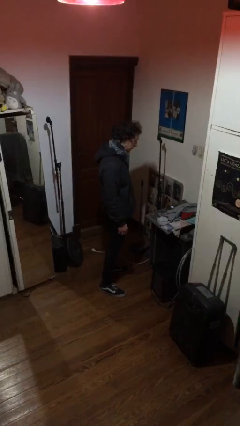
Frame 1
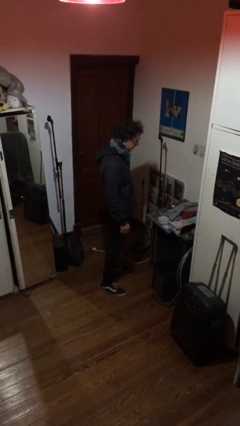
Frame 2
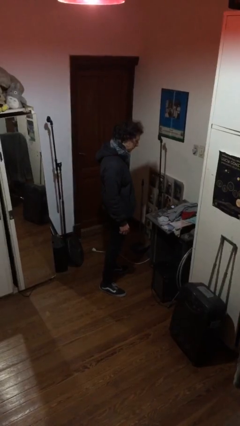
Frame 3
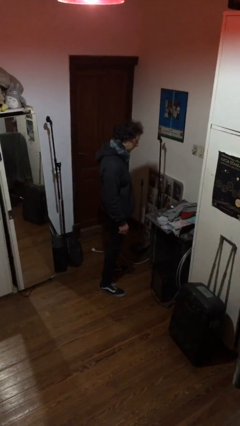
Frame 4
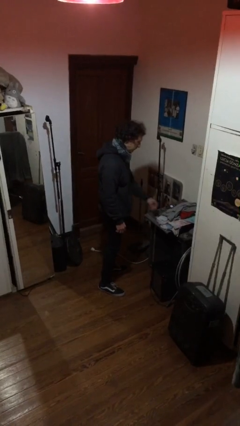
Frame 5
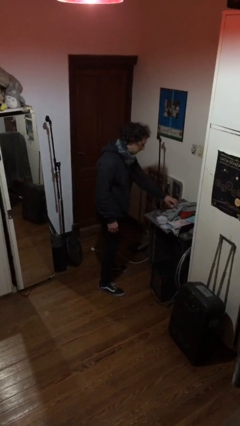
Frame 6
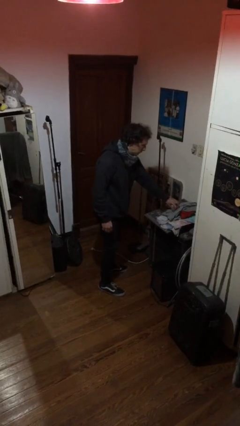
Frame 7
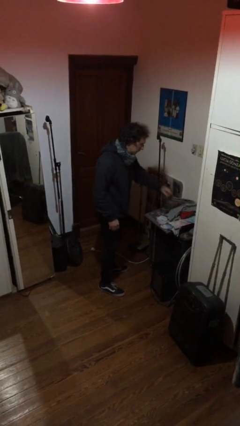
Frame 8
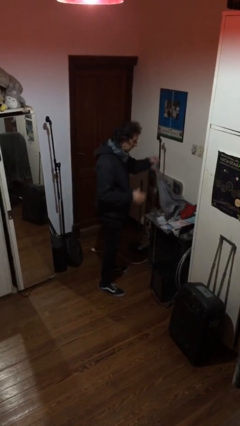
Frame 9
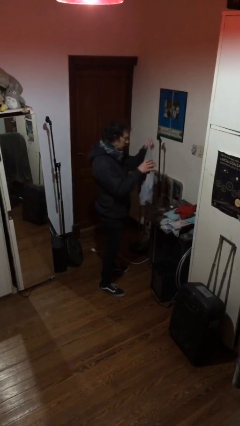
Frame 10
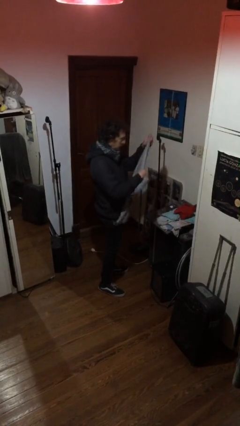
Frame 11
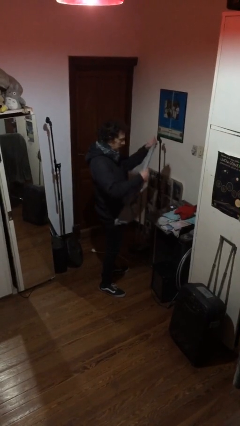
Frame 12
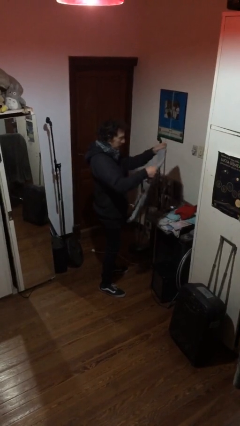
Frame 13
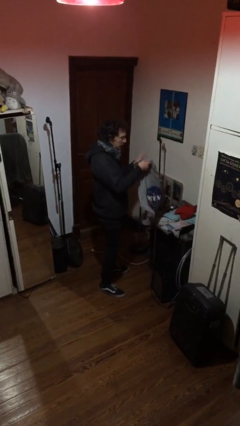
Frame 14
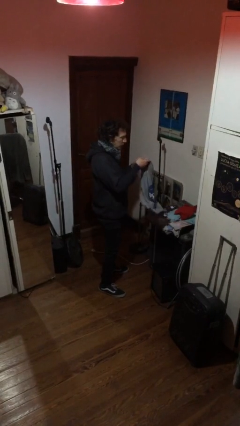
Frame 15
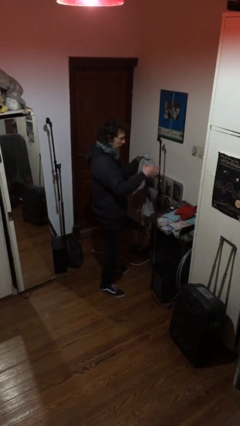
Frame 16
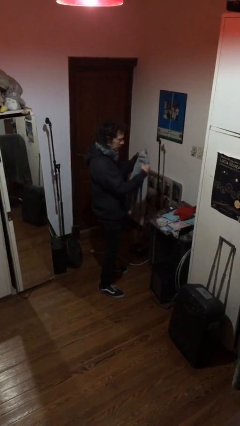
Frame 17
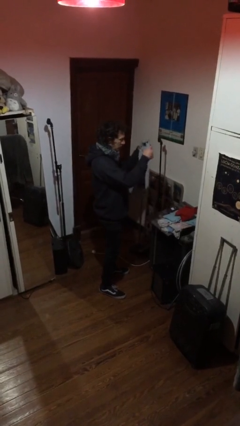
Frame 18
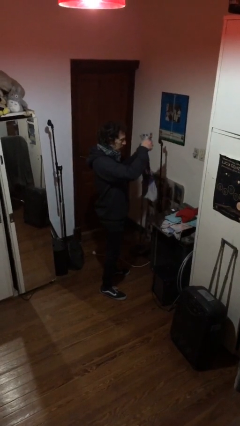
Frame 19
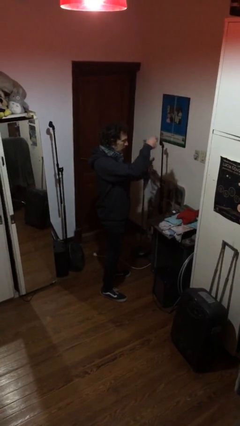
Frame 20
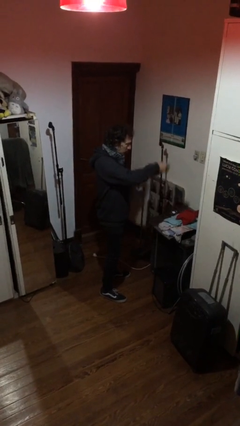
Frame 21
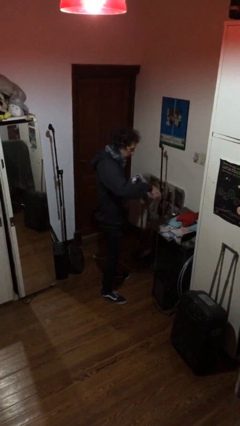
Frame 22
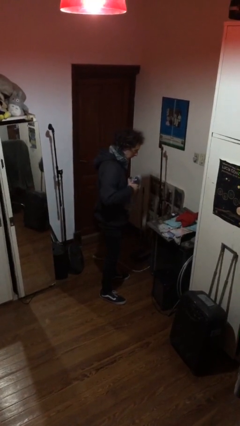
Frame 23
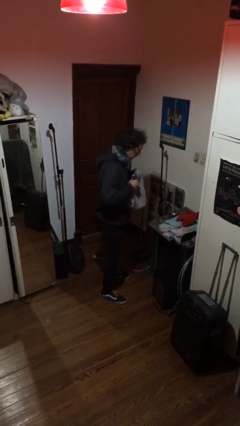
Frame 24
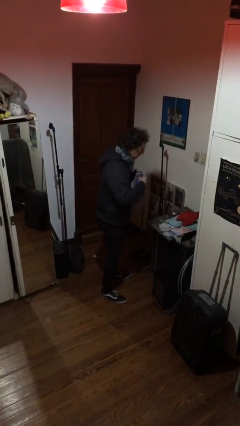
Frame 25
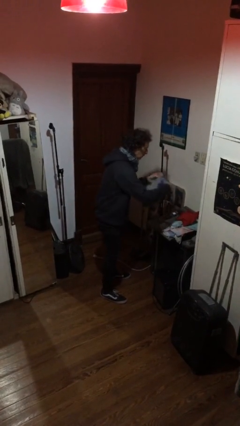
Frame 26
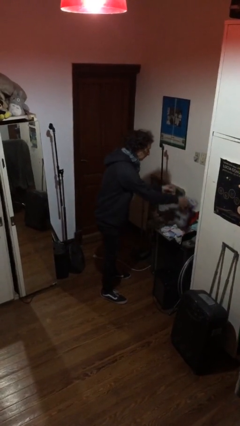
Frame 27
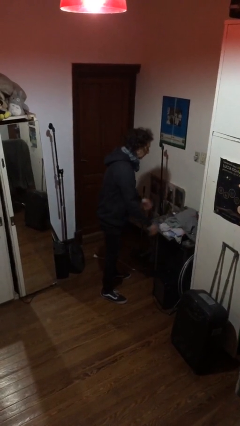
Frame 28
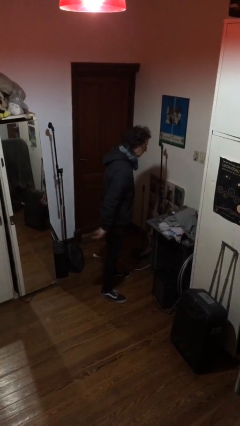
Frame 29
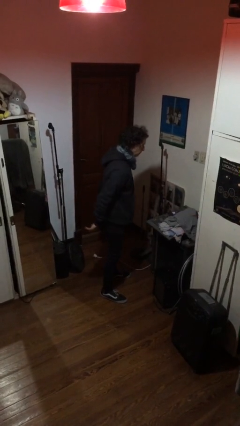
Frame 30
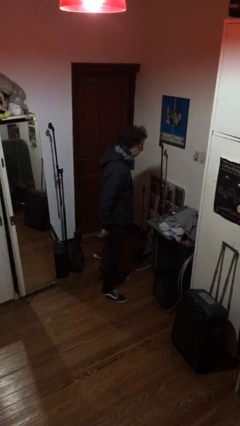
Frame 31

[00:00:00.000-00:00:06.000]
person folds shirt

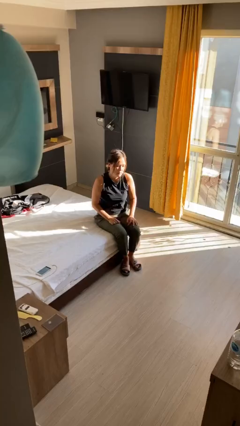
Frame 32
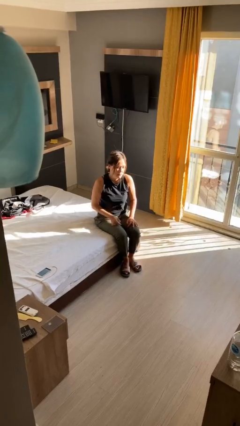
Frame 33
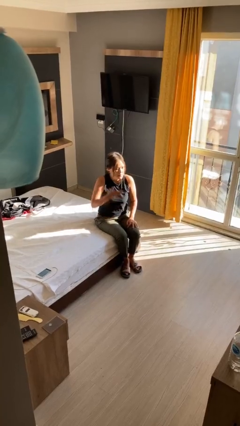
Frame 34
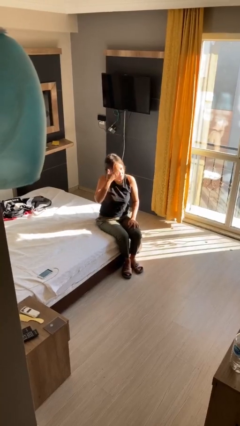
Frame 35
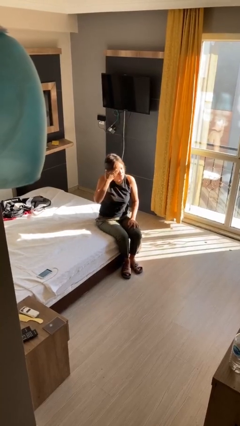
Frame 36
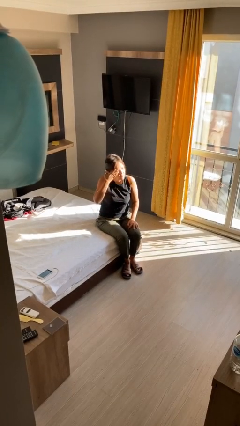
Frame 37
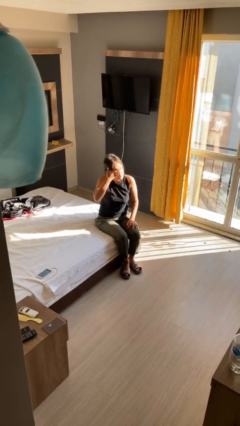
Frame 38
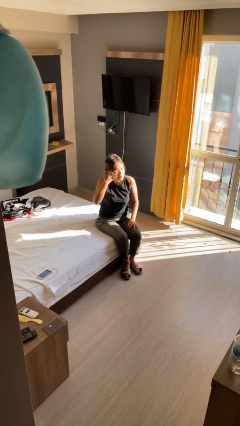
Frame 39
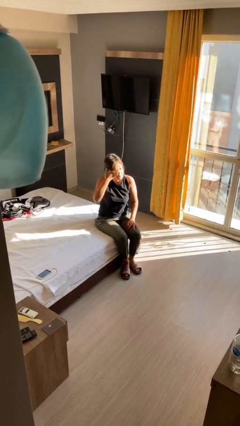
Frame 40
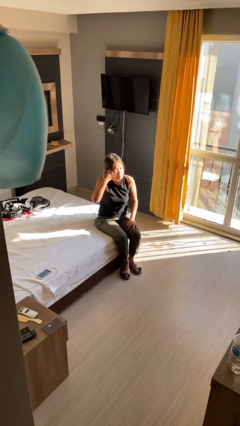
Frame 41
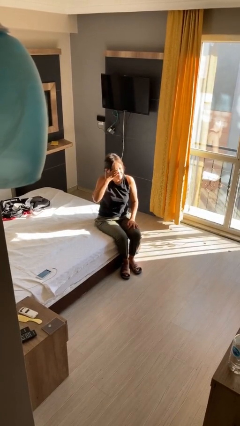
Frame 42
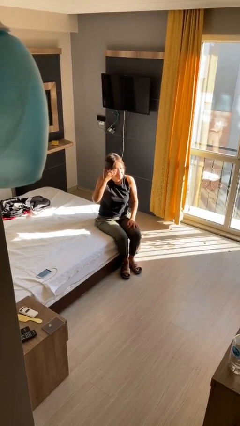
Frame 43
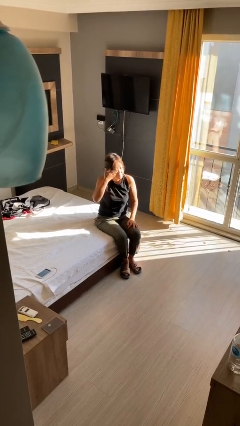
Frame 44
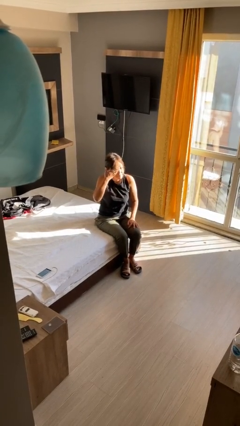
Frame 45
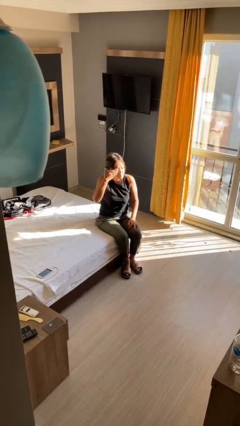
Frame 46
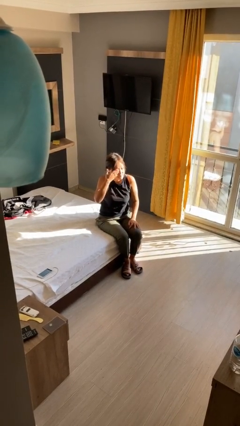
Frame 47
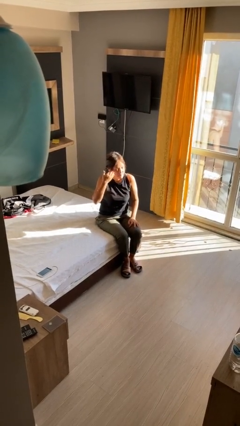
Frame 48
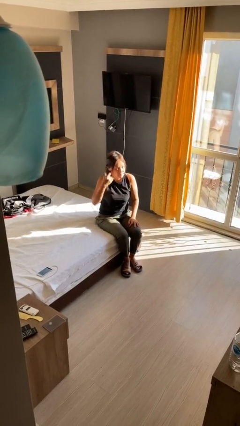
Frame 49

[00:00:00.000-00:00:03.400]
person rubs eyes

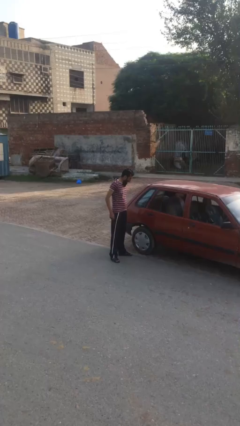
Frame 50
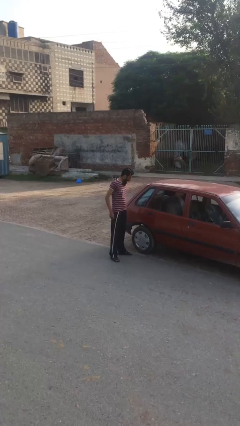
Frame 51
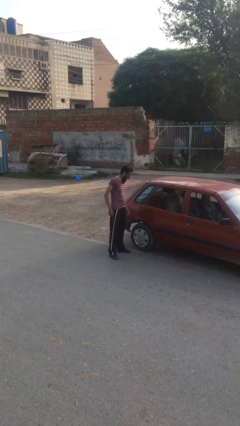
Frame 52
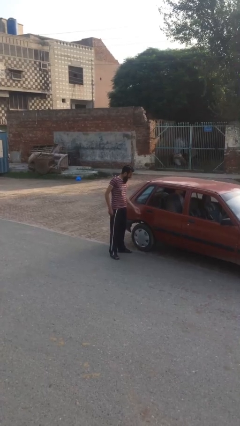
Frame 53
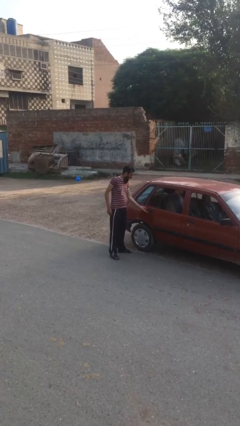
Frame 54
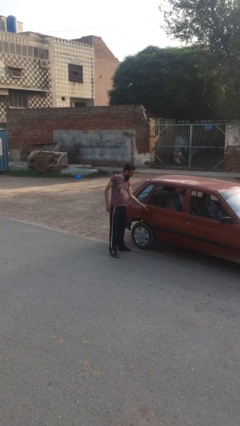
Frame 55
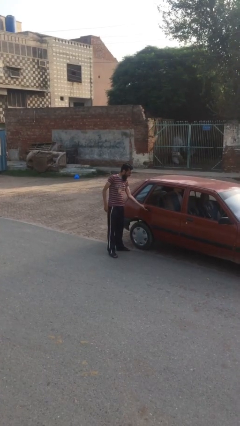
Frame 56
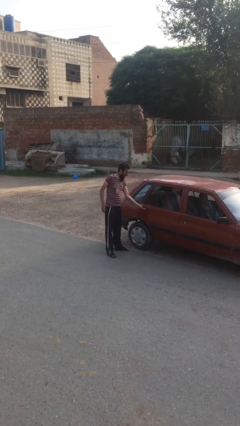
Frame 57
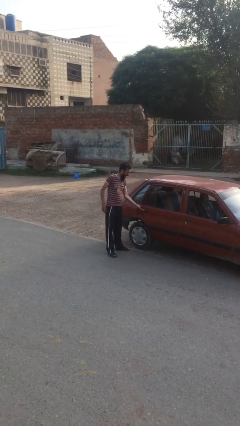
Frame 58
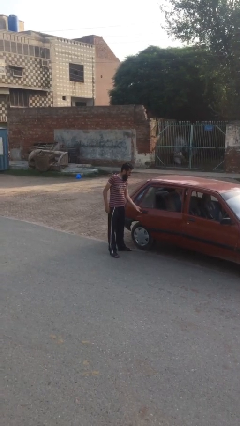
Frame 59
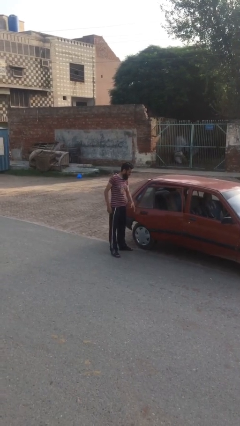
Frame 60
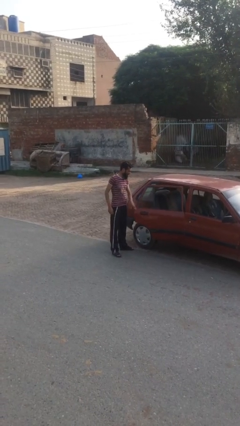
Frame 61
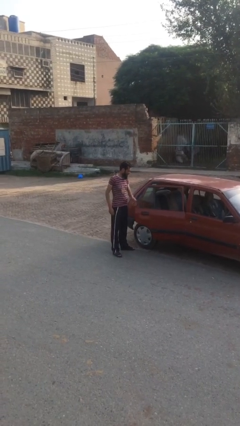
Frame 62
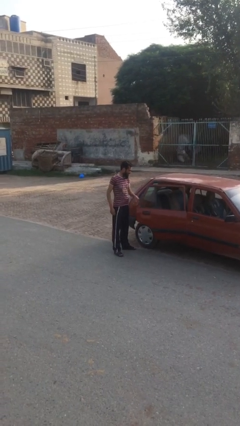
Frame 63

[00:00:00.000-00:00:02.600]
person opens car door

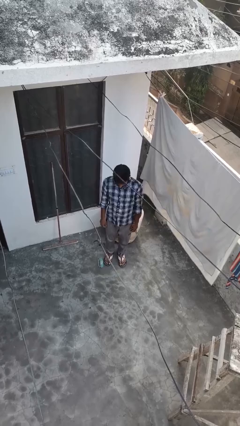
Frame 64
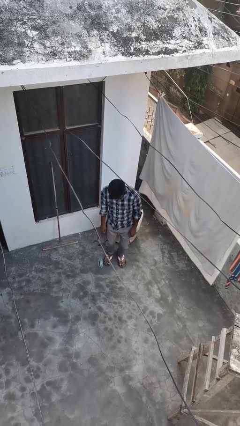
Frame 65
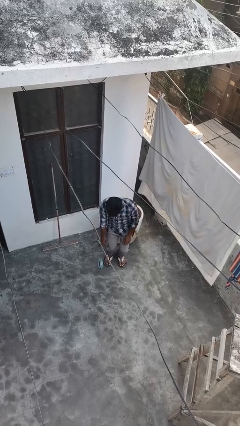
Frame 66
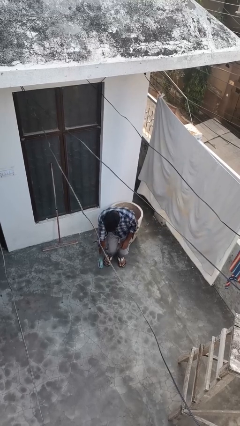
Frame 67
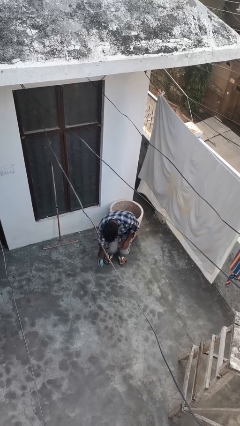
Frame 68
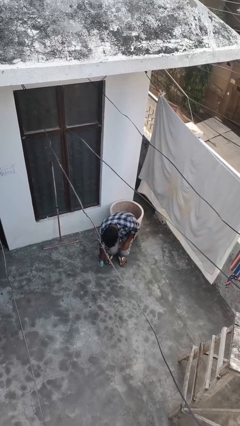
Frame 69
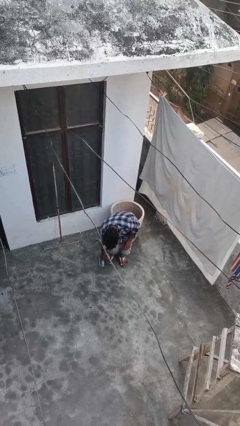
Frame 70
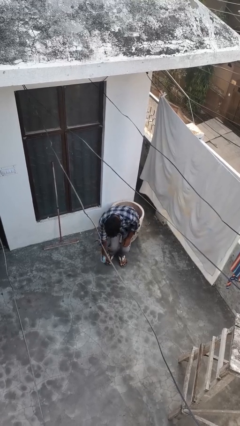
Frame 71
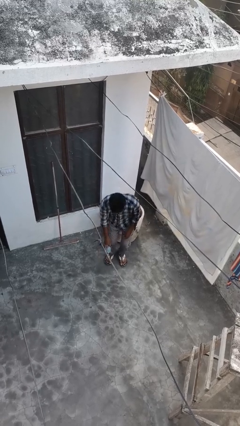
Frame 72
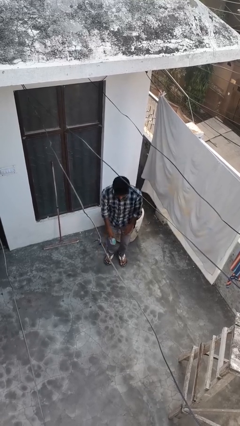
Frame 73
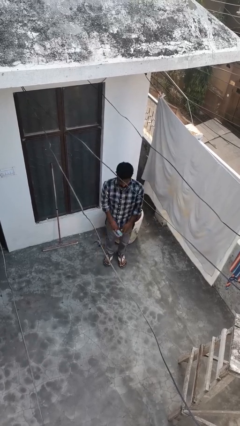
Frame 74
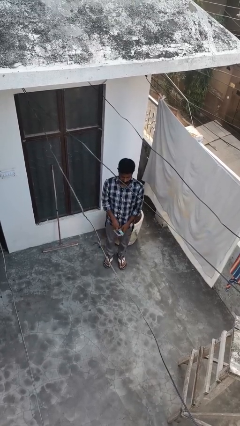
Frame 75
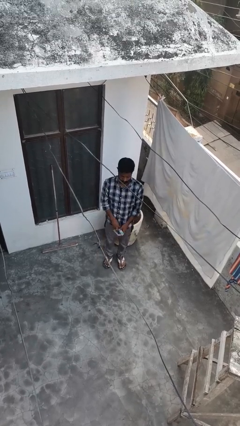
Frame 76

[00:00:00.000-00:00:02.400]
person picks up object from floor

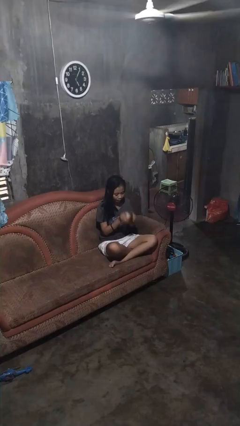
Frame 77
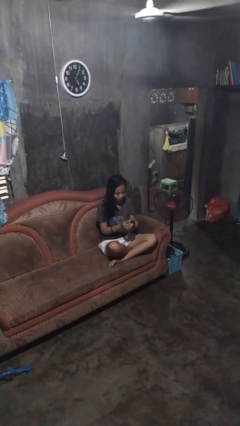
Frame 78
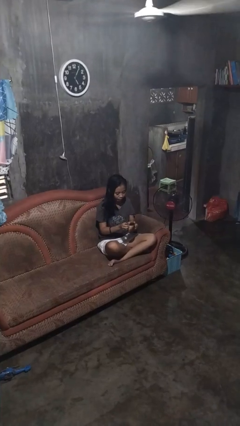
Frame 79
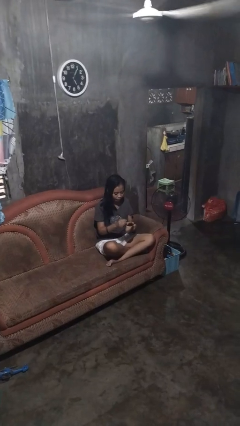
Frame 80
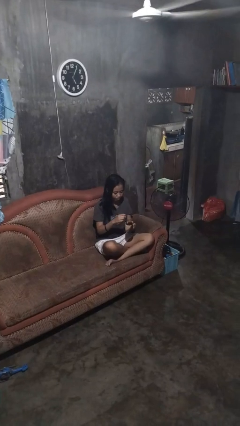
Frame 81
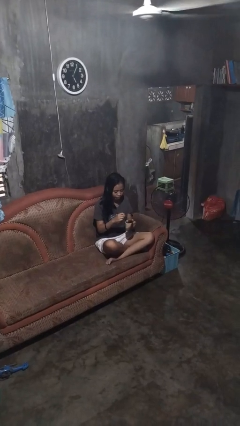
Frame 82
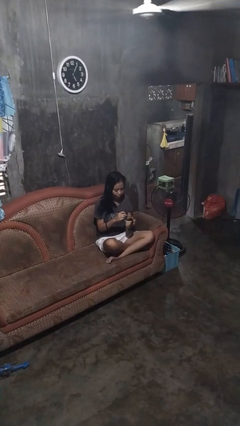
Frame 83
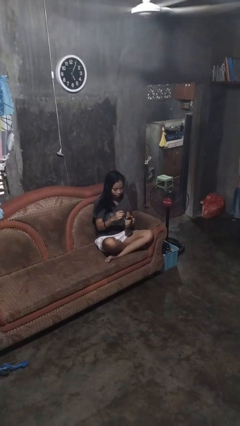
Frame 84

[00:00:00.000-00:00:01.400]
person stirs mug

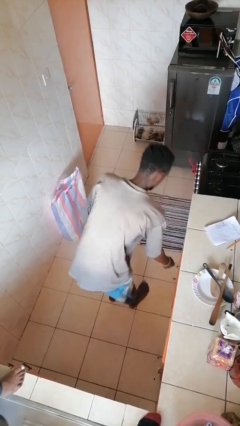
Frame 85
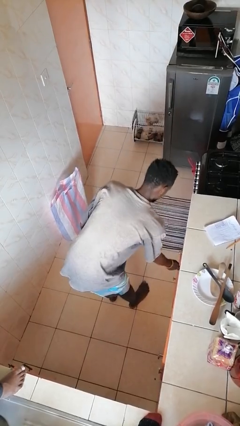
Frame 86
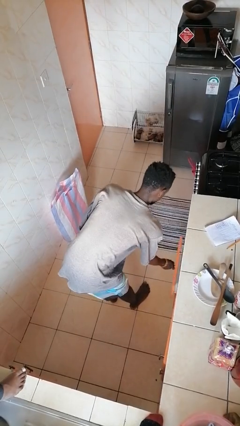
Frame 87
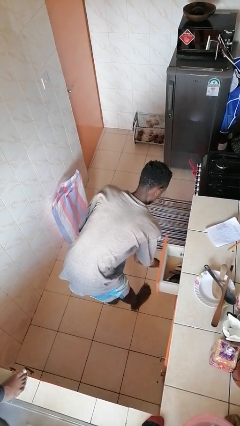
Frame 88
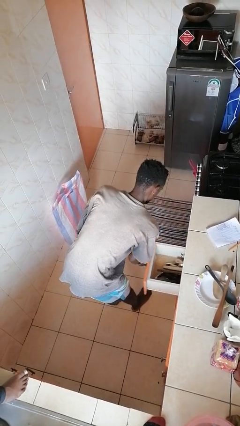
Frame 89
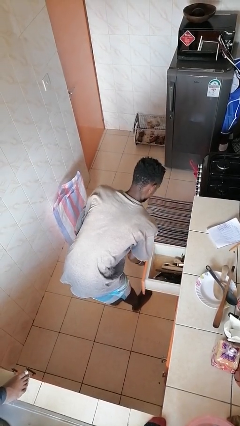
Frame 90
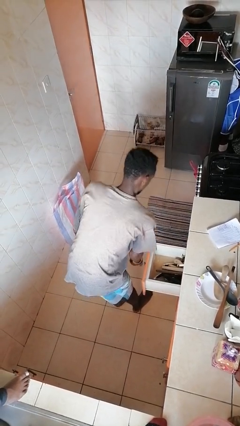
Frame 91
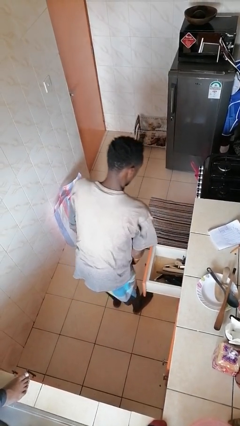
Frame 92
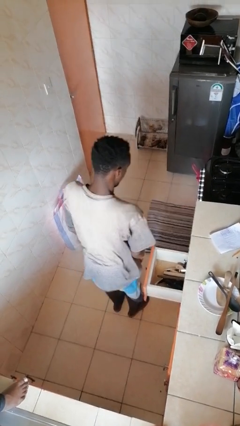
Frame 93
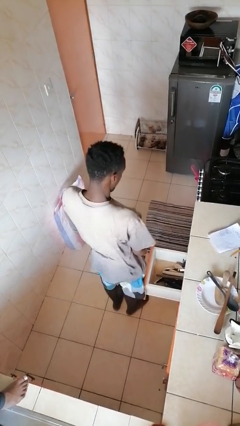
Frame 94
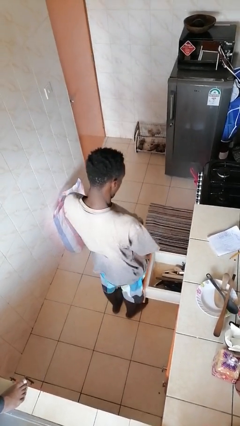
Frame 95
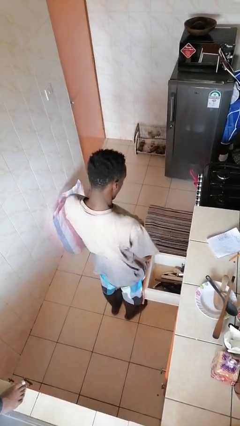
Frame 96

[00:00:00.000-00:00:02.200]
person opens kitchen drawer
